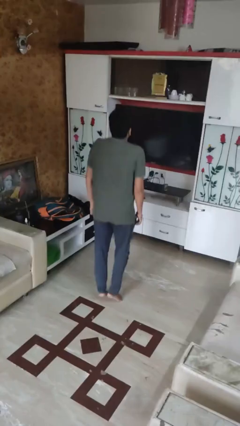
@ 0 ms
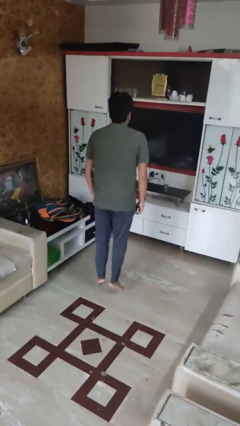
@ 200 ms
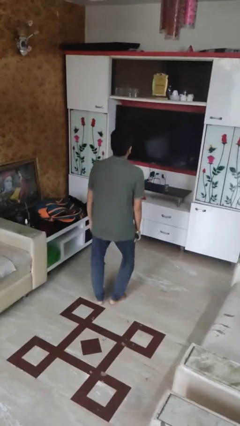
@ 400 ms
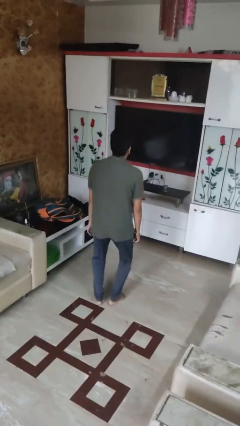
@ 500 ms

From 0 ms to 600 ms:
person jumps

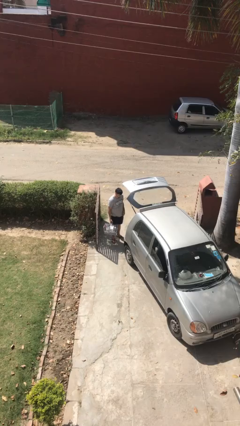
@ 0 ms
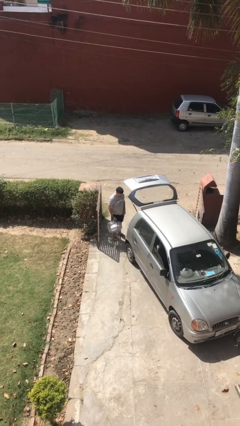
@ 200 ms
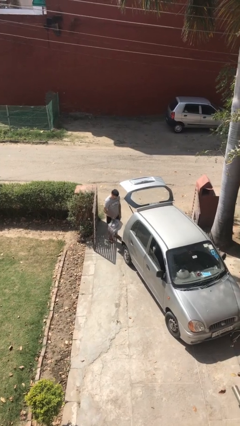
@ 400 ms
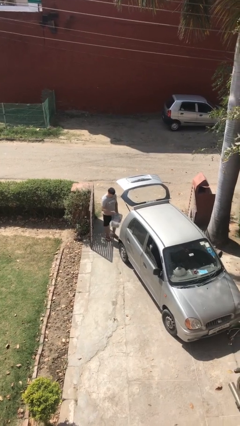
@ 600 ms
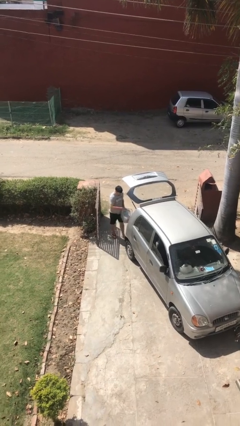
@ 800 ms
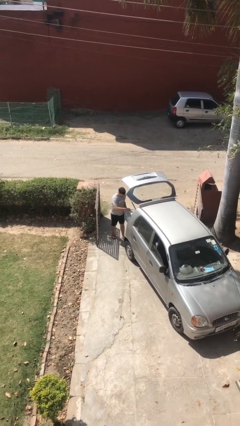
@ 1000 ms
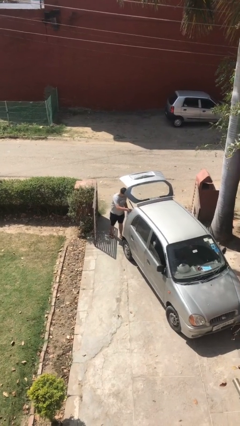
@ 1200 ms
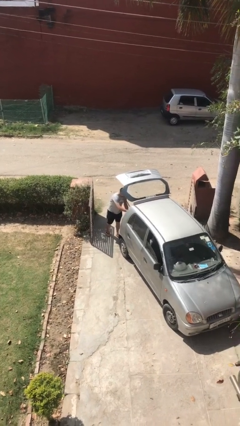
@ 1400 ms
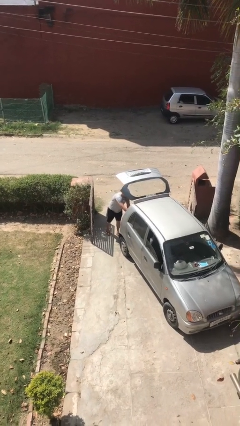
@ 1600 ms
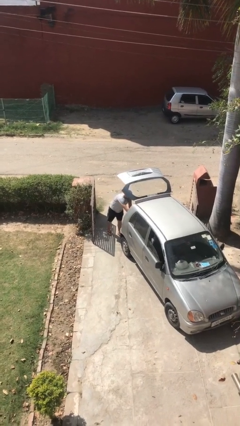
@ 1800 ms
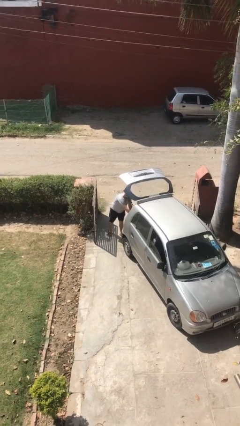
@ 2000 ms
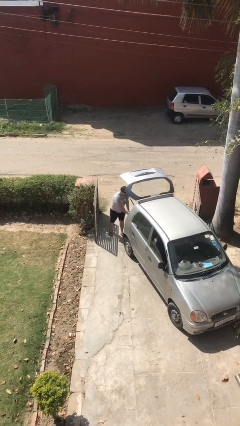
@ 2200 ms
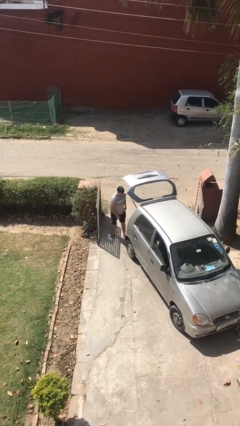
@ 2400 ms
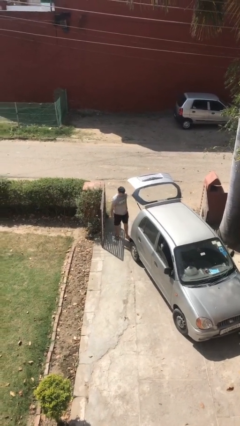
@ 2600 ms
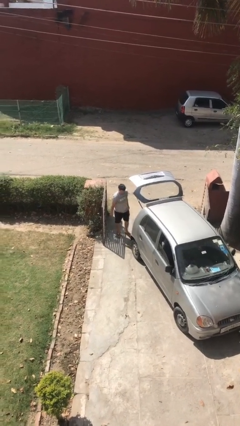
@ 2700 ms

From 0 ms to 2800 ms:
person loads car

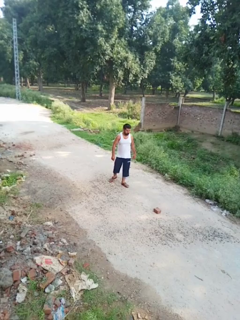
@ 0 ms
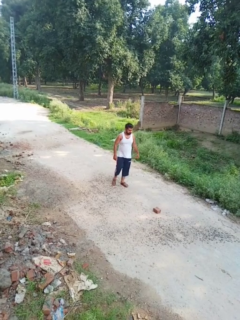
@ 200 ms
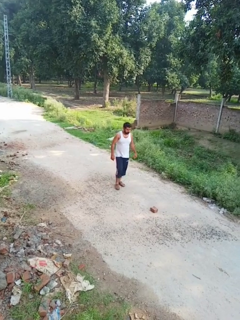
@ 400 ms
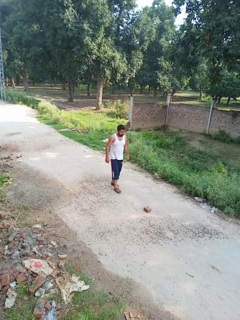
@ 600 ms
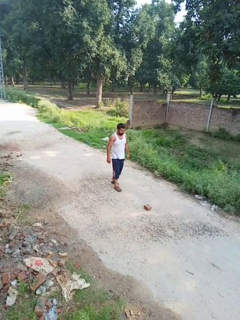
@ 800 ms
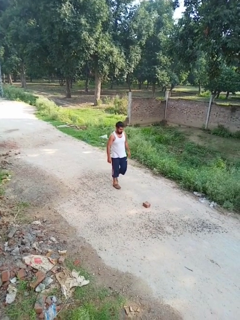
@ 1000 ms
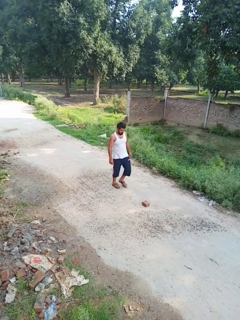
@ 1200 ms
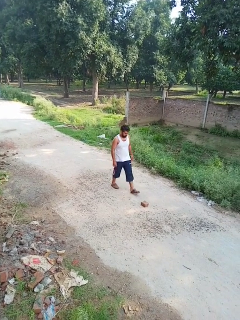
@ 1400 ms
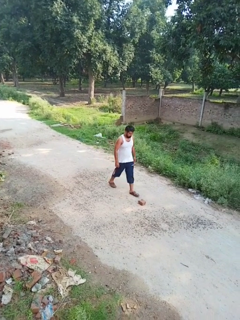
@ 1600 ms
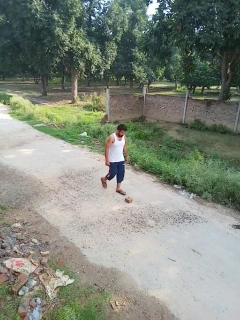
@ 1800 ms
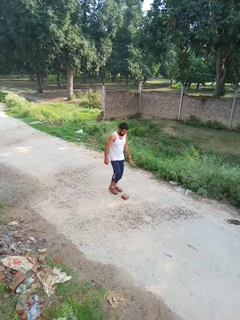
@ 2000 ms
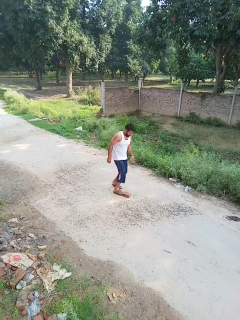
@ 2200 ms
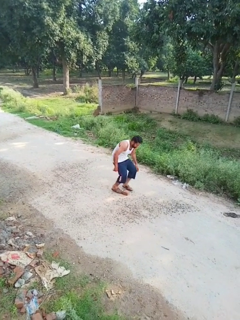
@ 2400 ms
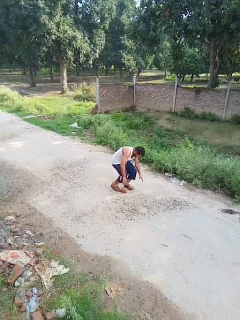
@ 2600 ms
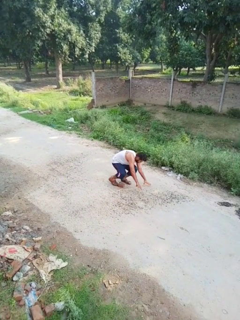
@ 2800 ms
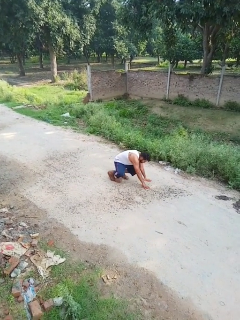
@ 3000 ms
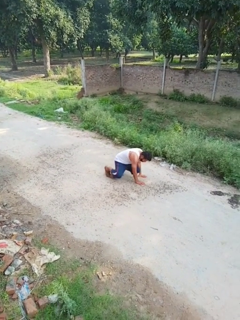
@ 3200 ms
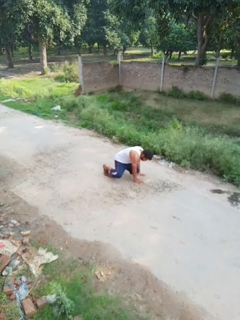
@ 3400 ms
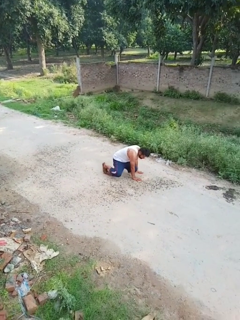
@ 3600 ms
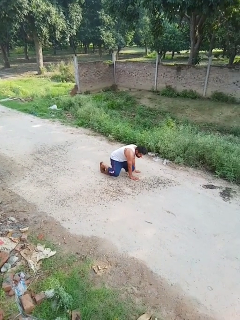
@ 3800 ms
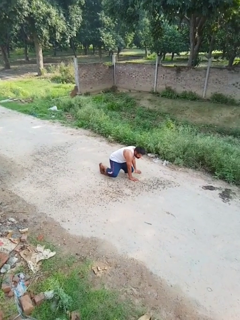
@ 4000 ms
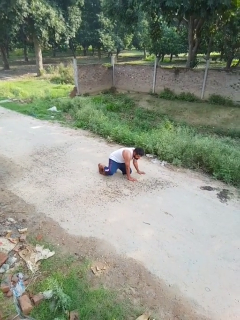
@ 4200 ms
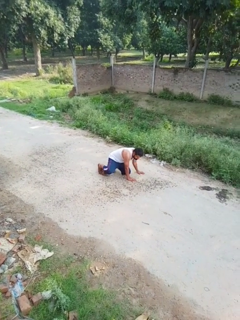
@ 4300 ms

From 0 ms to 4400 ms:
person trips on object on floor

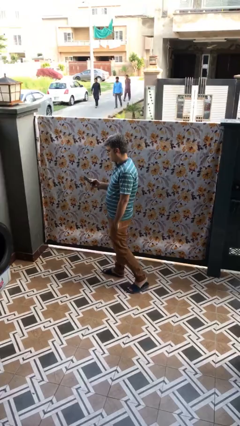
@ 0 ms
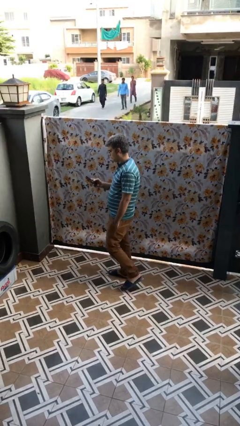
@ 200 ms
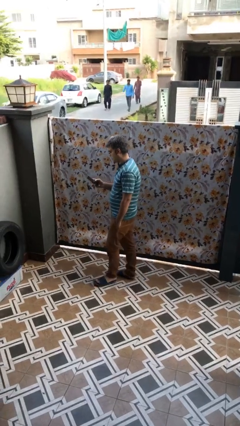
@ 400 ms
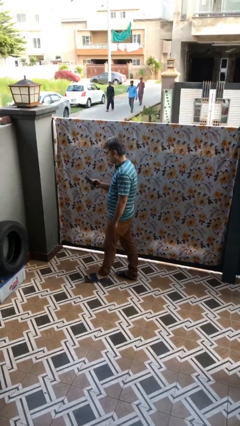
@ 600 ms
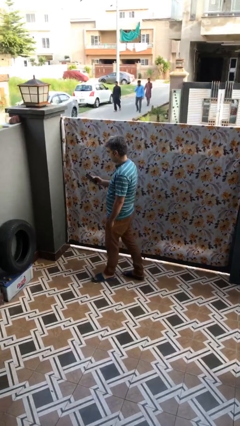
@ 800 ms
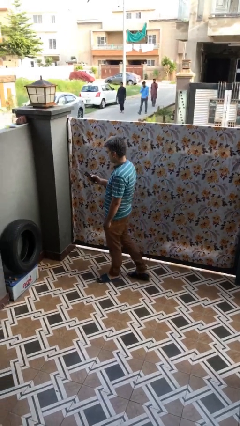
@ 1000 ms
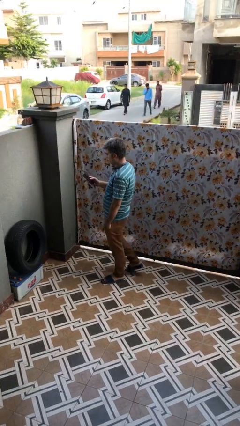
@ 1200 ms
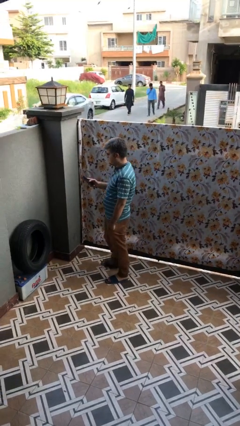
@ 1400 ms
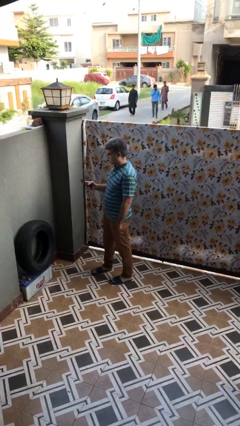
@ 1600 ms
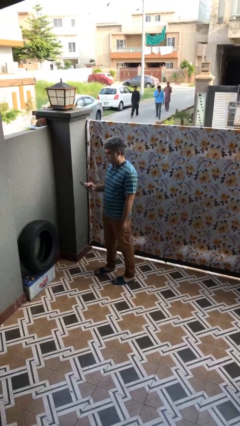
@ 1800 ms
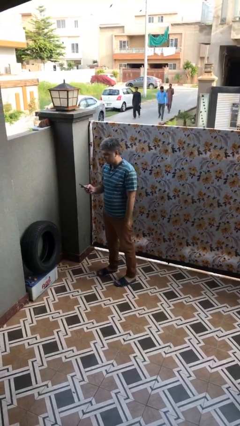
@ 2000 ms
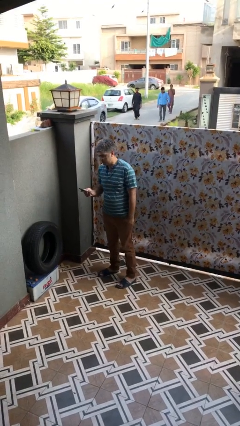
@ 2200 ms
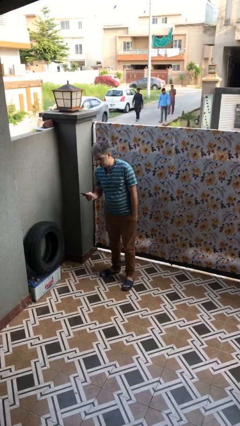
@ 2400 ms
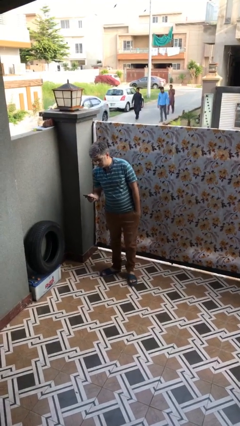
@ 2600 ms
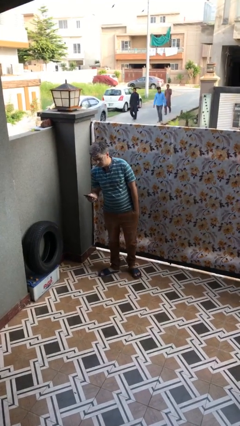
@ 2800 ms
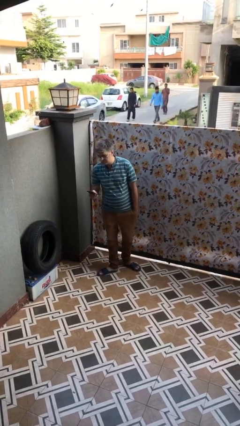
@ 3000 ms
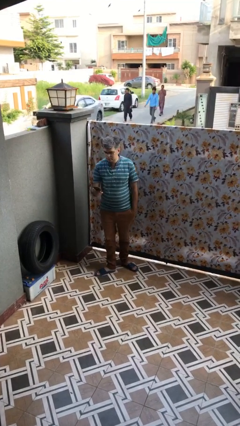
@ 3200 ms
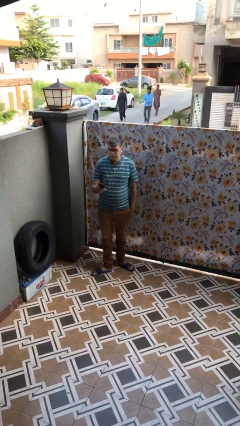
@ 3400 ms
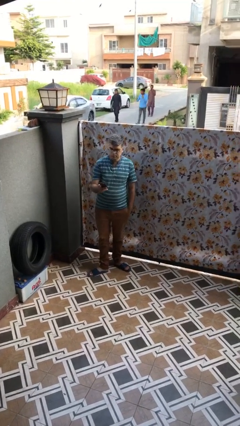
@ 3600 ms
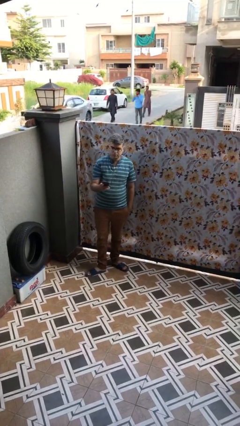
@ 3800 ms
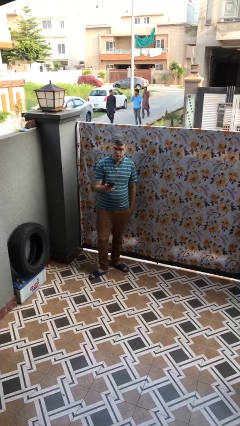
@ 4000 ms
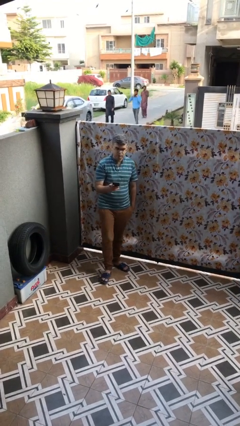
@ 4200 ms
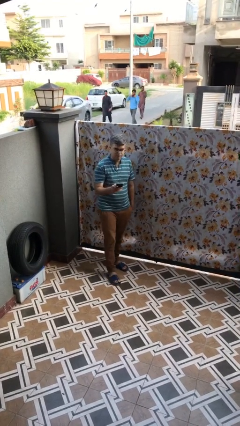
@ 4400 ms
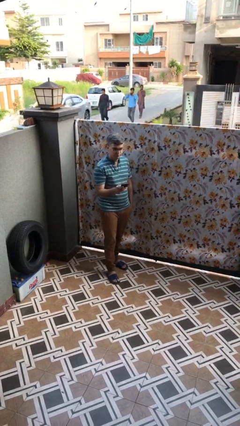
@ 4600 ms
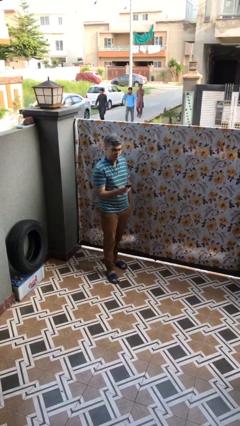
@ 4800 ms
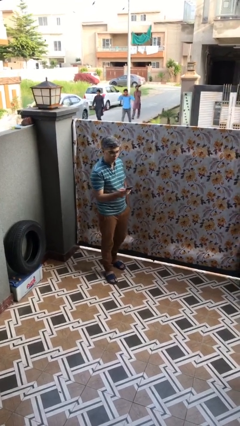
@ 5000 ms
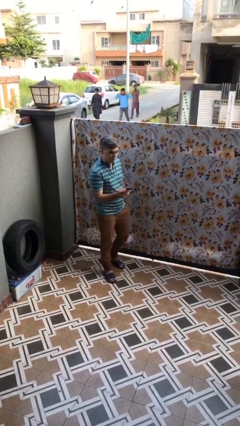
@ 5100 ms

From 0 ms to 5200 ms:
person texts on phone

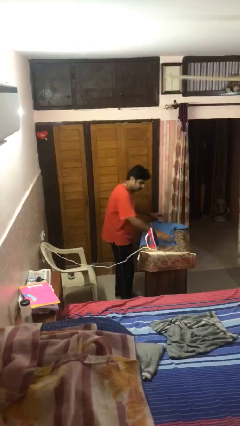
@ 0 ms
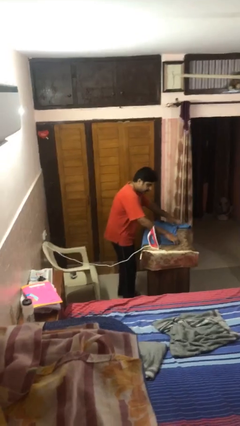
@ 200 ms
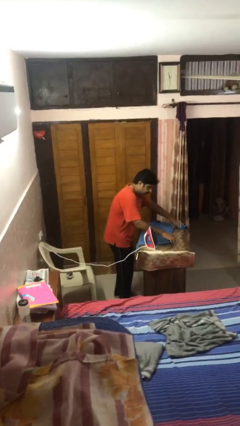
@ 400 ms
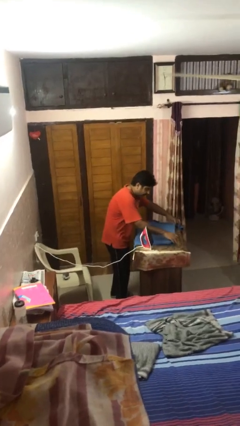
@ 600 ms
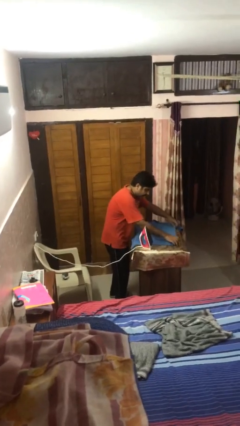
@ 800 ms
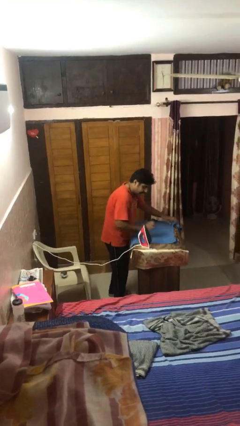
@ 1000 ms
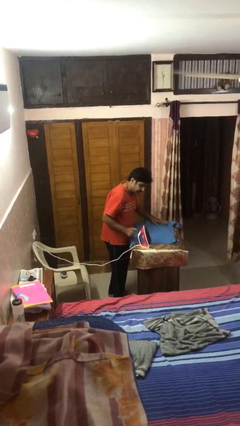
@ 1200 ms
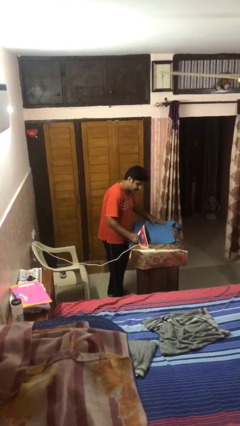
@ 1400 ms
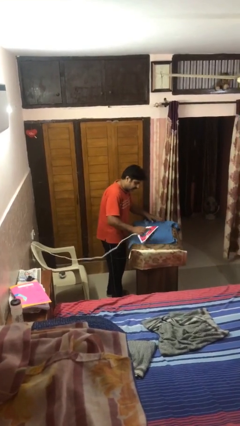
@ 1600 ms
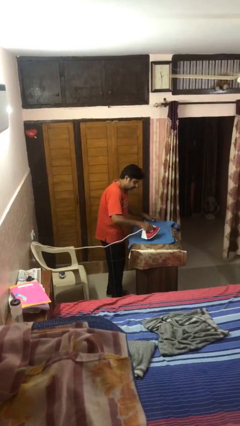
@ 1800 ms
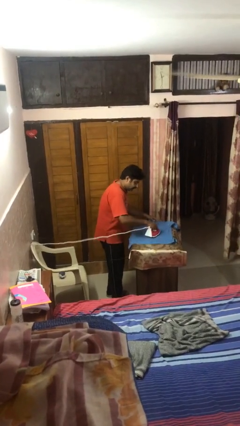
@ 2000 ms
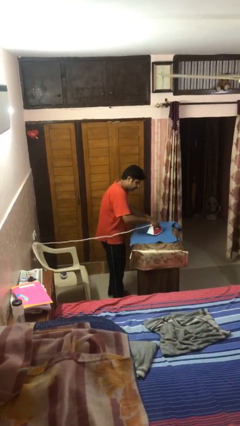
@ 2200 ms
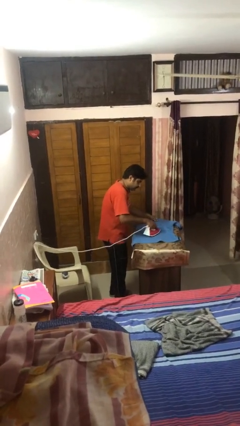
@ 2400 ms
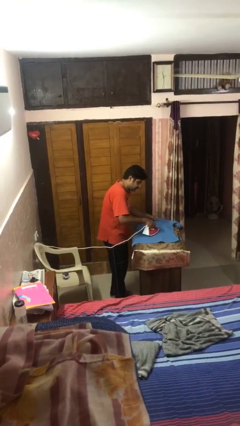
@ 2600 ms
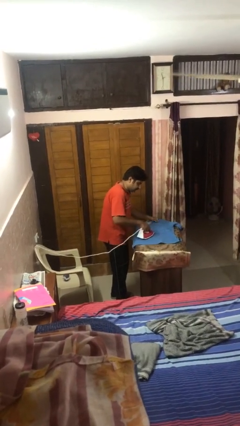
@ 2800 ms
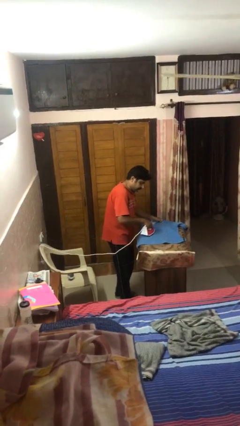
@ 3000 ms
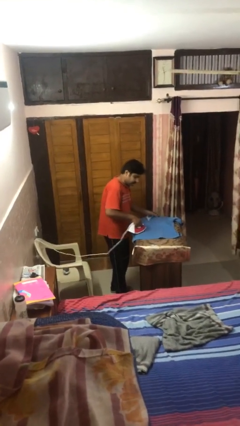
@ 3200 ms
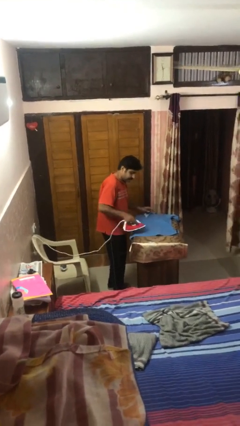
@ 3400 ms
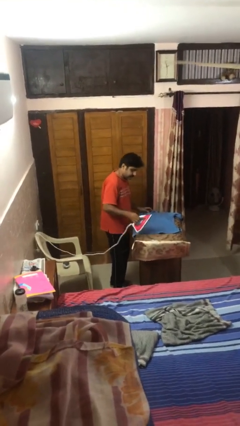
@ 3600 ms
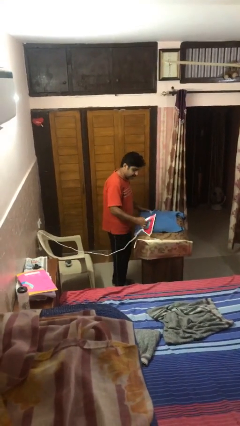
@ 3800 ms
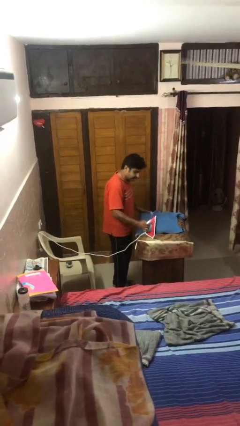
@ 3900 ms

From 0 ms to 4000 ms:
person irons clothes

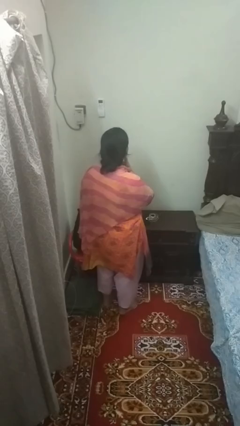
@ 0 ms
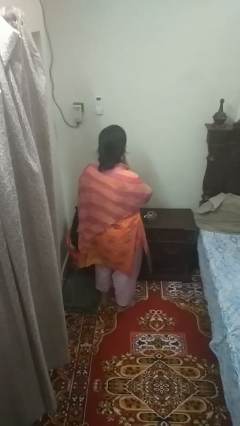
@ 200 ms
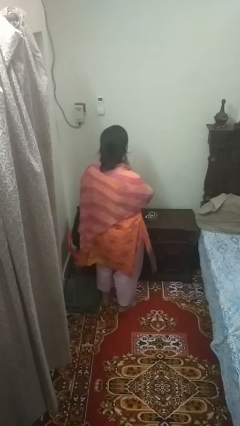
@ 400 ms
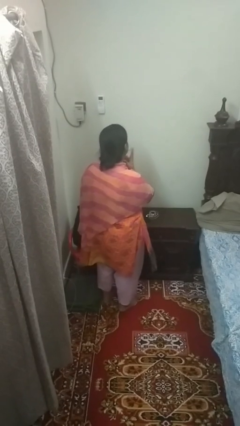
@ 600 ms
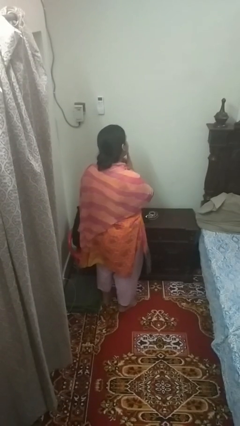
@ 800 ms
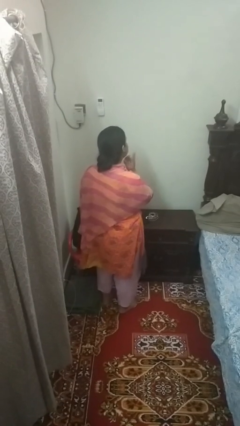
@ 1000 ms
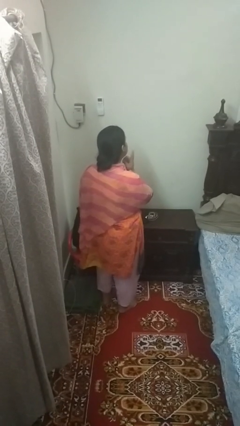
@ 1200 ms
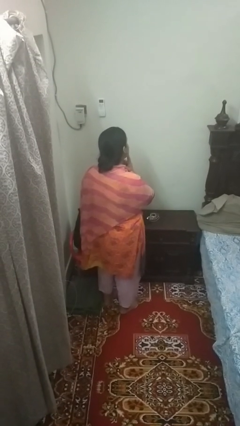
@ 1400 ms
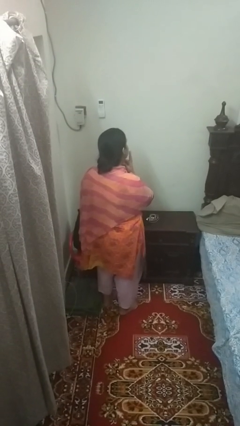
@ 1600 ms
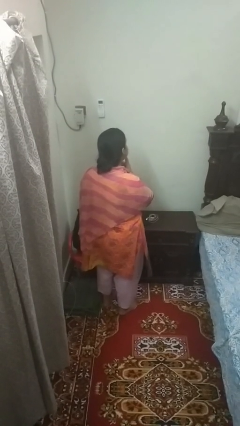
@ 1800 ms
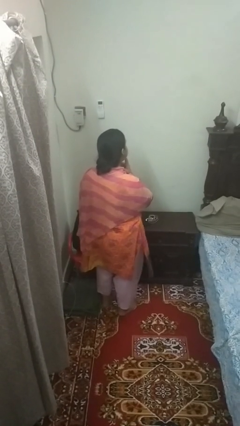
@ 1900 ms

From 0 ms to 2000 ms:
person strokes chin
